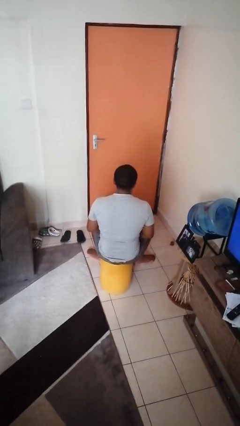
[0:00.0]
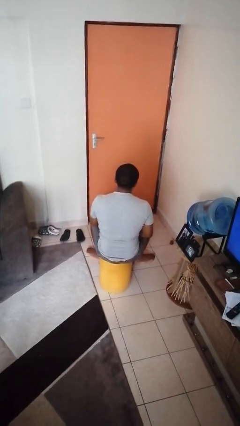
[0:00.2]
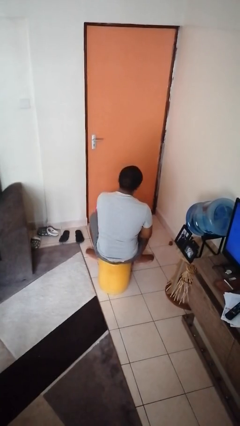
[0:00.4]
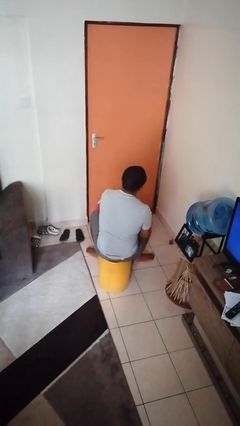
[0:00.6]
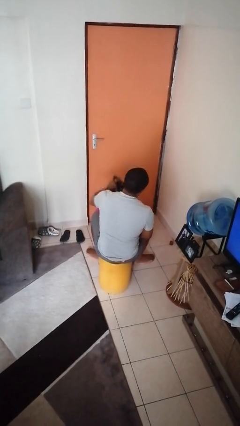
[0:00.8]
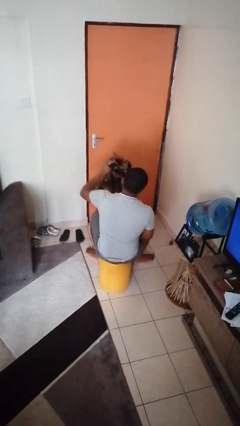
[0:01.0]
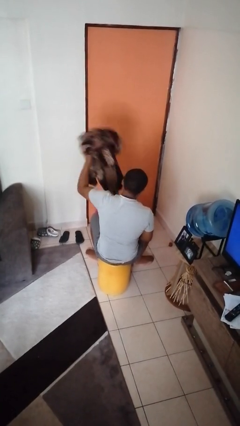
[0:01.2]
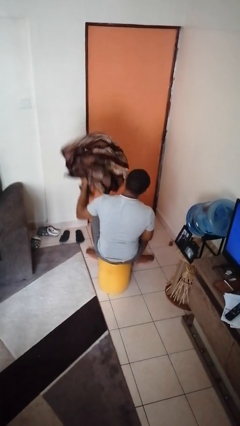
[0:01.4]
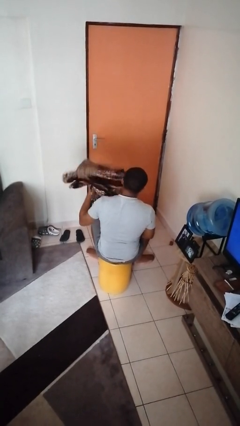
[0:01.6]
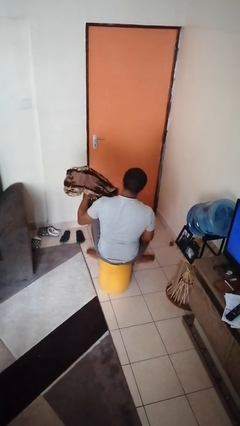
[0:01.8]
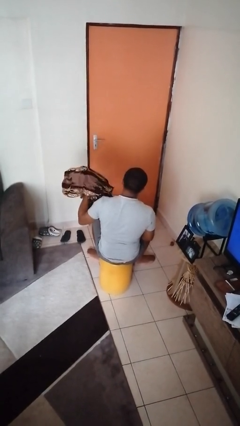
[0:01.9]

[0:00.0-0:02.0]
person takes object from basket

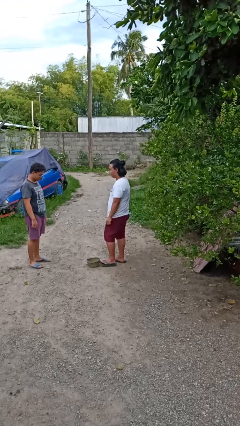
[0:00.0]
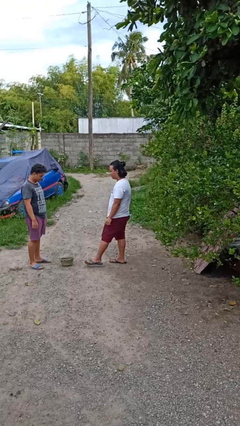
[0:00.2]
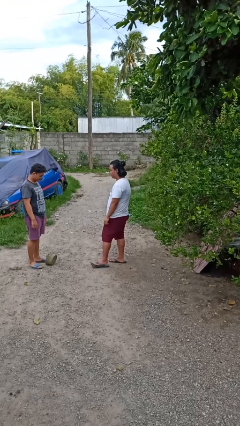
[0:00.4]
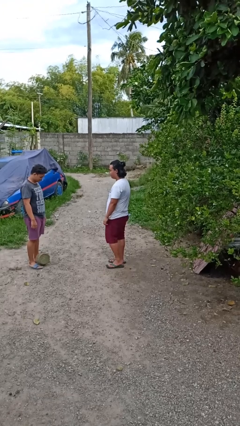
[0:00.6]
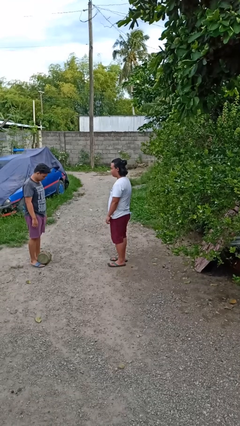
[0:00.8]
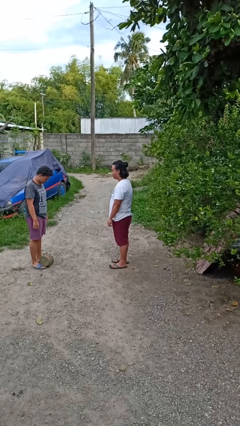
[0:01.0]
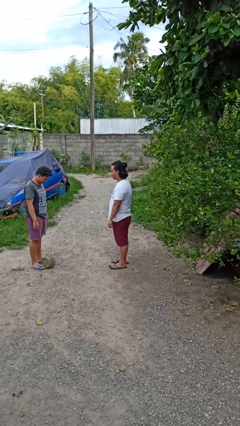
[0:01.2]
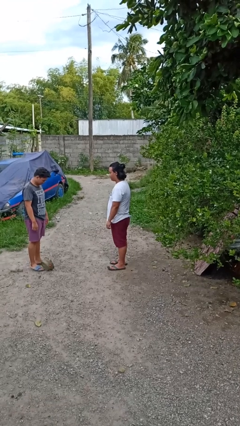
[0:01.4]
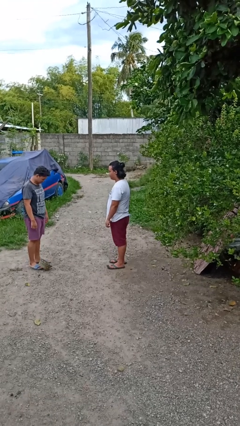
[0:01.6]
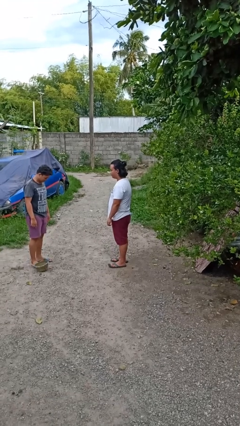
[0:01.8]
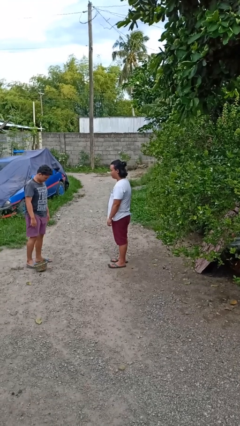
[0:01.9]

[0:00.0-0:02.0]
person kicks object to person

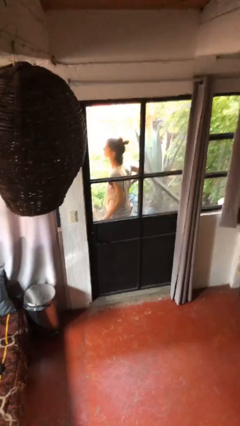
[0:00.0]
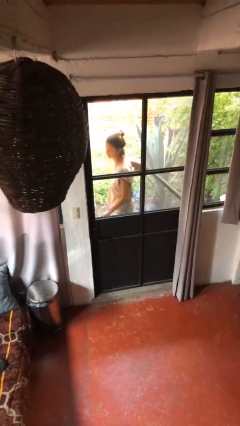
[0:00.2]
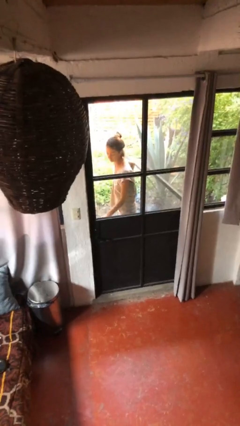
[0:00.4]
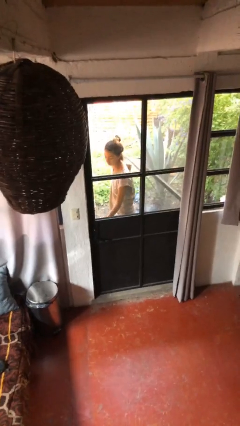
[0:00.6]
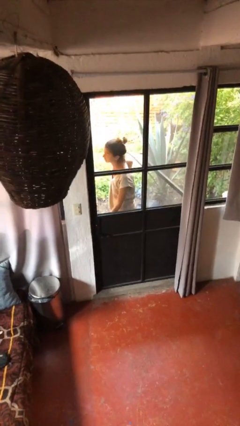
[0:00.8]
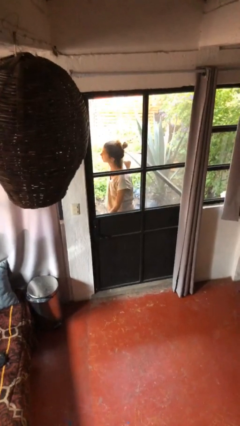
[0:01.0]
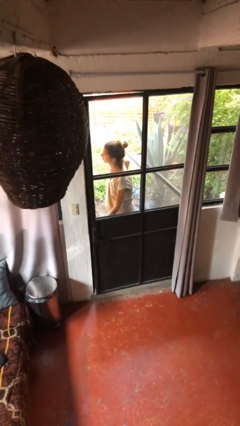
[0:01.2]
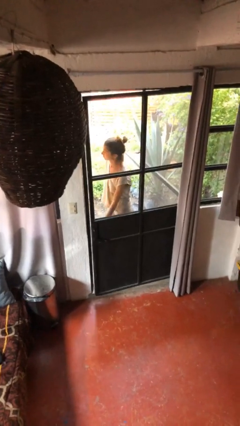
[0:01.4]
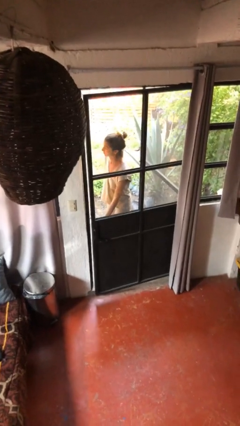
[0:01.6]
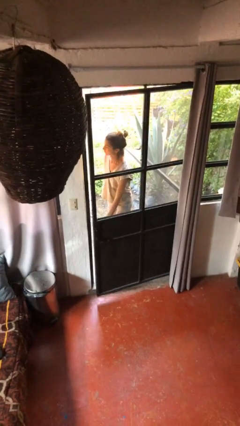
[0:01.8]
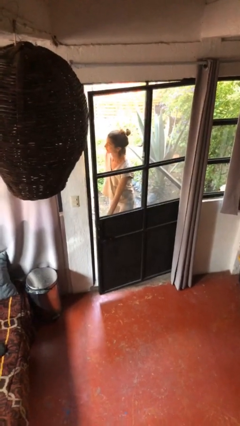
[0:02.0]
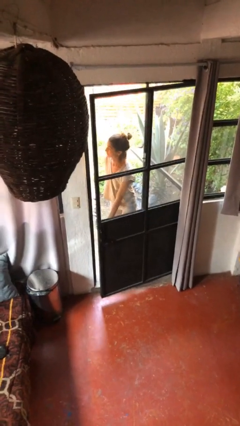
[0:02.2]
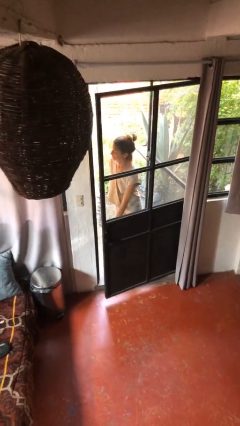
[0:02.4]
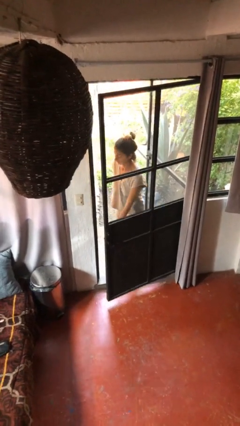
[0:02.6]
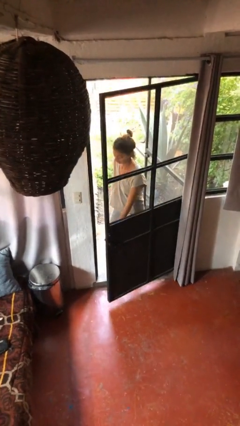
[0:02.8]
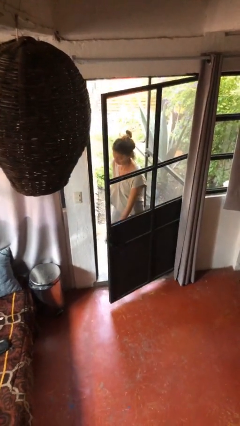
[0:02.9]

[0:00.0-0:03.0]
person opens facility door

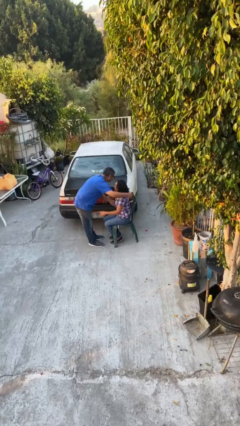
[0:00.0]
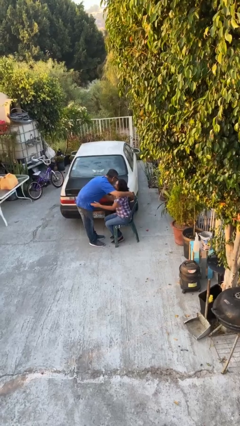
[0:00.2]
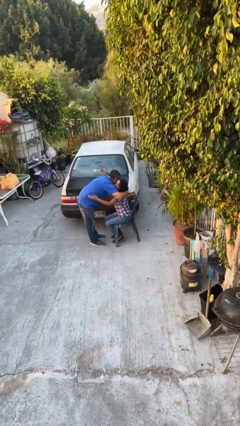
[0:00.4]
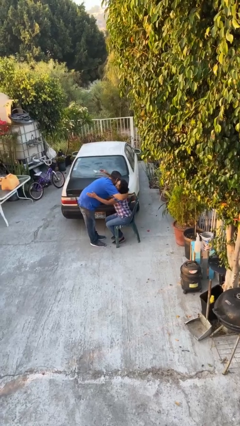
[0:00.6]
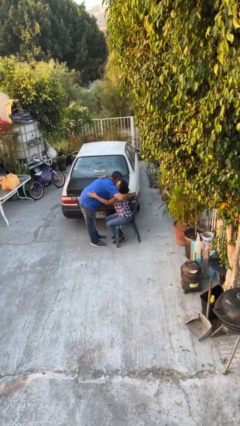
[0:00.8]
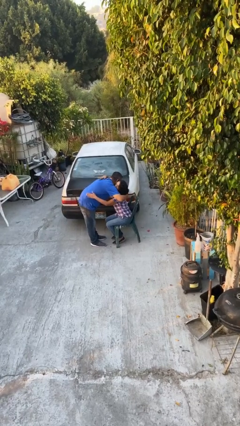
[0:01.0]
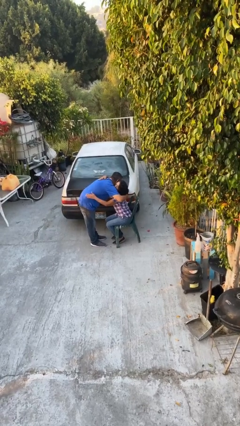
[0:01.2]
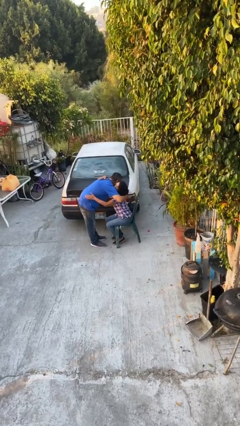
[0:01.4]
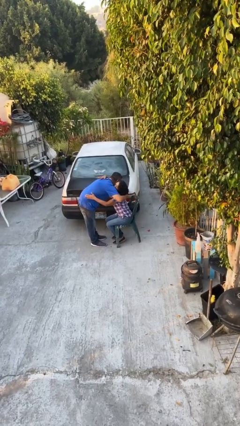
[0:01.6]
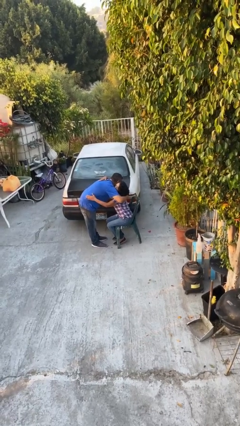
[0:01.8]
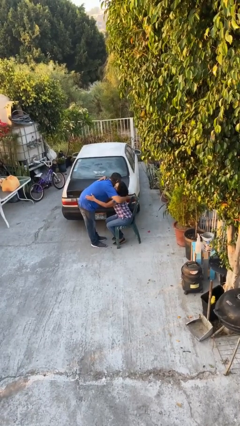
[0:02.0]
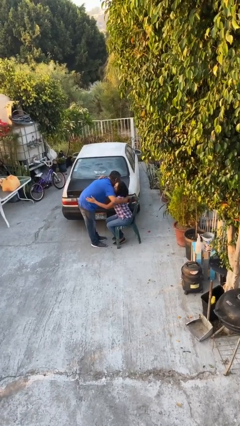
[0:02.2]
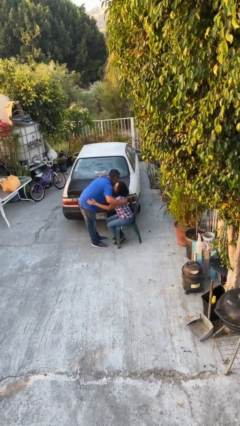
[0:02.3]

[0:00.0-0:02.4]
person embraces person

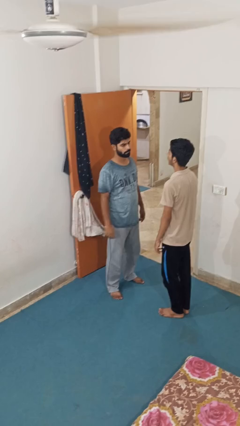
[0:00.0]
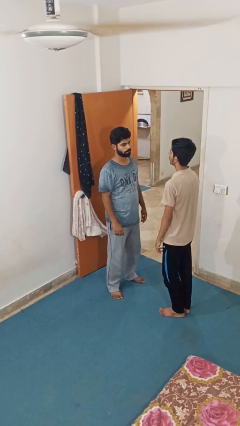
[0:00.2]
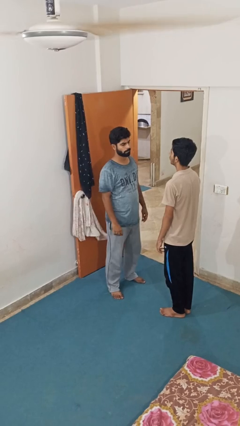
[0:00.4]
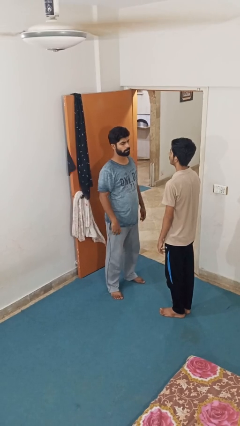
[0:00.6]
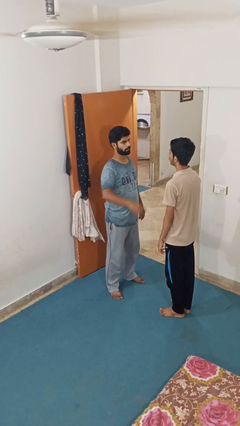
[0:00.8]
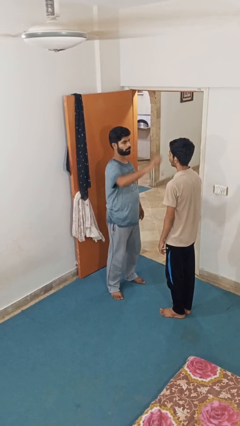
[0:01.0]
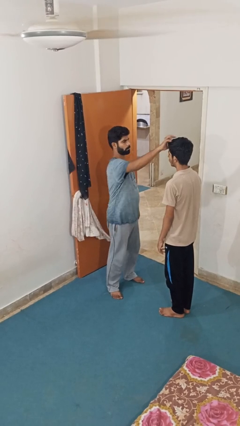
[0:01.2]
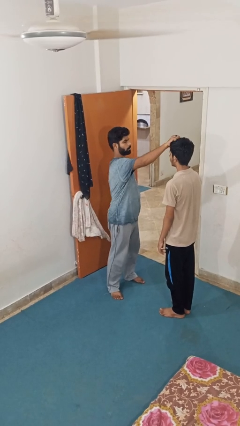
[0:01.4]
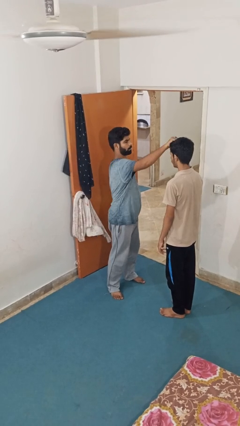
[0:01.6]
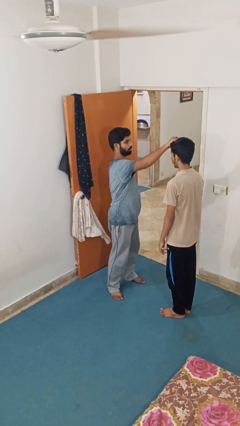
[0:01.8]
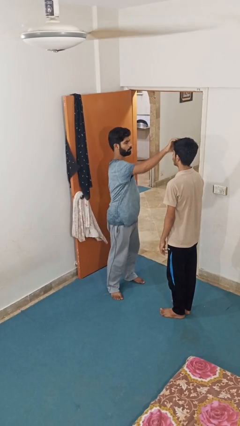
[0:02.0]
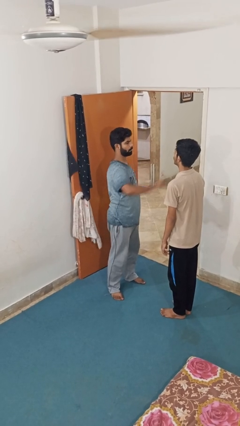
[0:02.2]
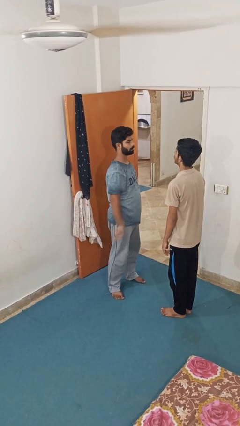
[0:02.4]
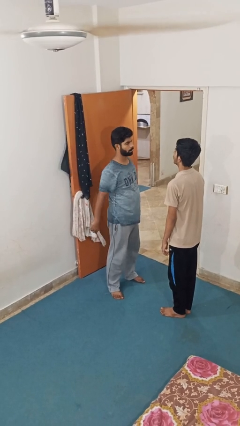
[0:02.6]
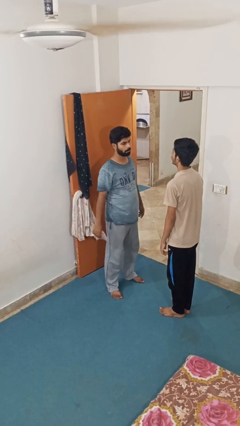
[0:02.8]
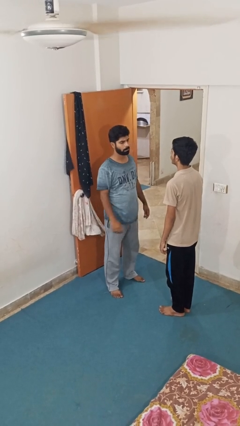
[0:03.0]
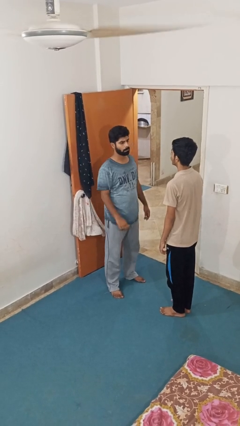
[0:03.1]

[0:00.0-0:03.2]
person grabs person by hair

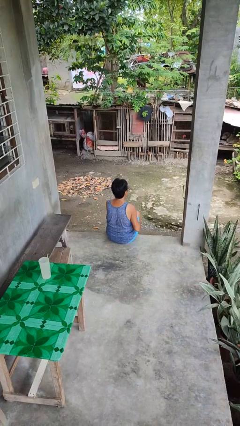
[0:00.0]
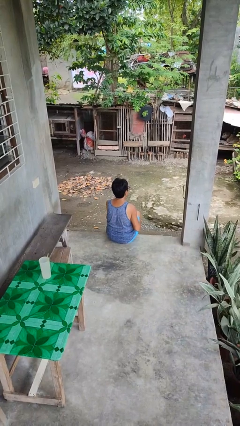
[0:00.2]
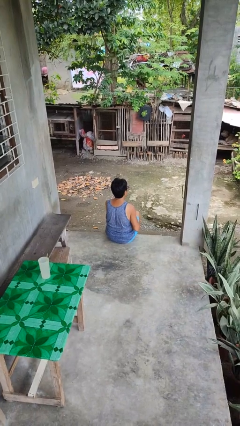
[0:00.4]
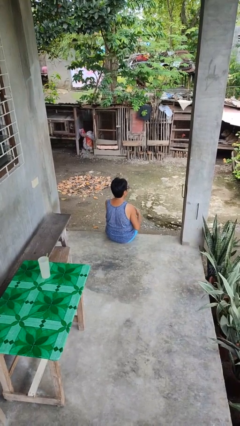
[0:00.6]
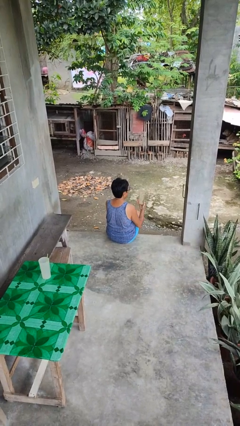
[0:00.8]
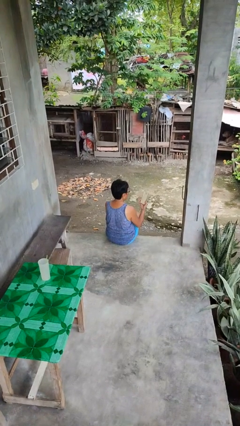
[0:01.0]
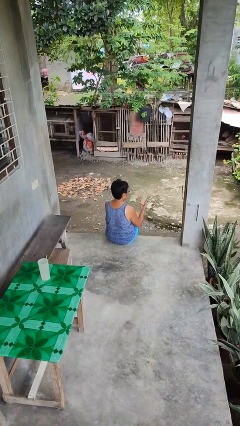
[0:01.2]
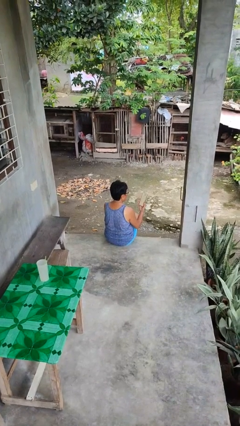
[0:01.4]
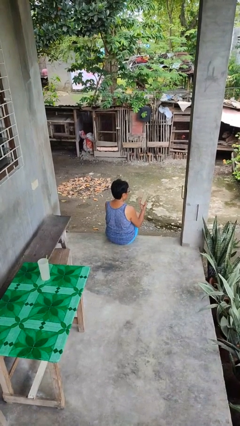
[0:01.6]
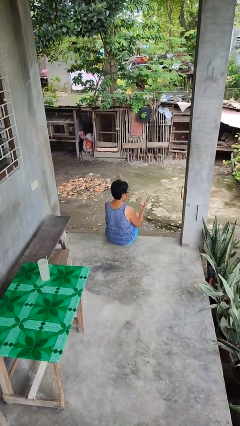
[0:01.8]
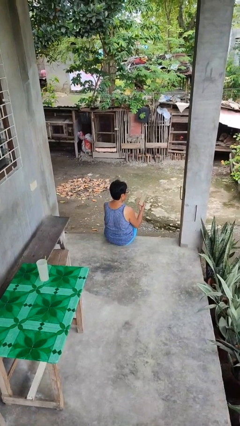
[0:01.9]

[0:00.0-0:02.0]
person takes phone from pocket

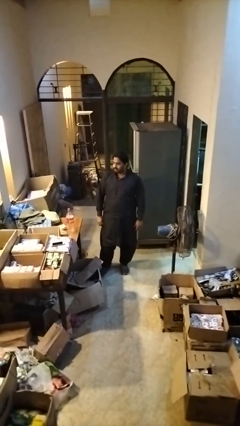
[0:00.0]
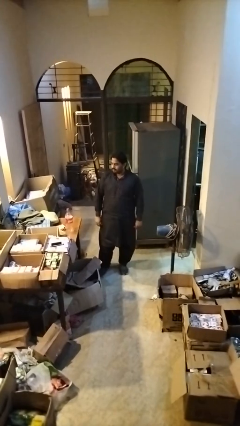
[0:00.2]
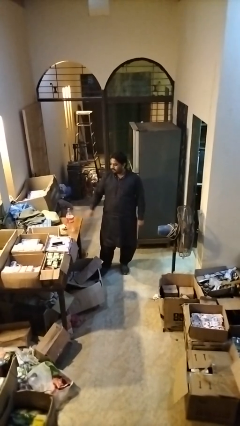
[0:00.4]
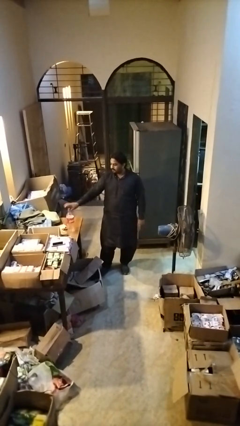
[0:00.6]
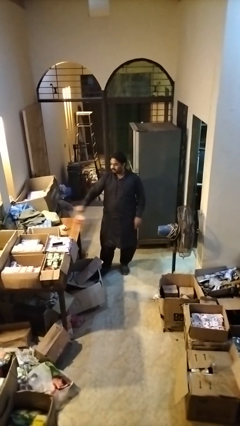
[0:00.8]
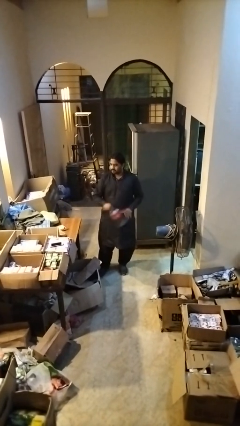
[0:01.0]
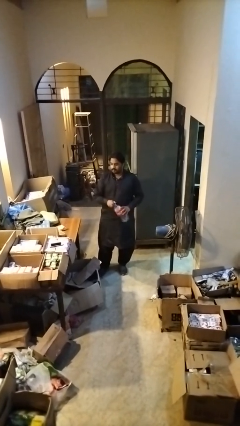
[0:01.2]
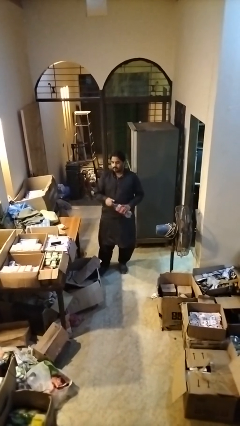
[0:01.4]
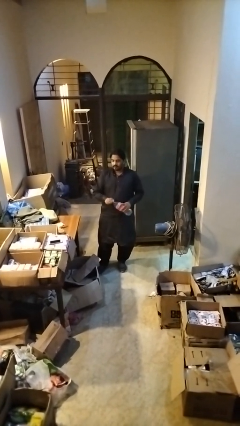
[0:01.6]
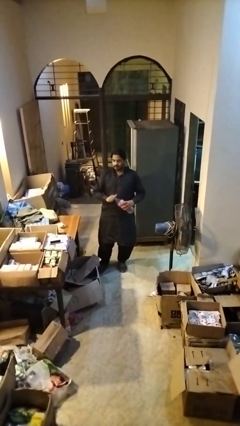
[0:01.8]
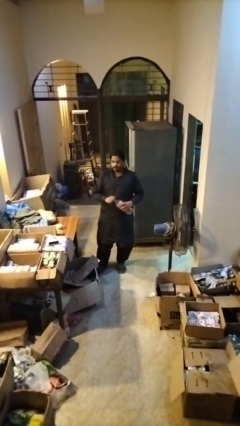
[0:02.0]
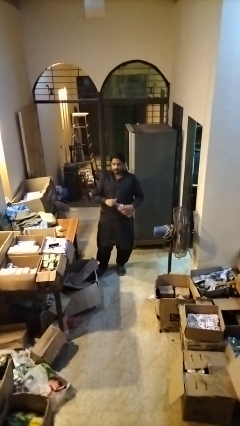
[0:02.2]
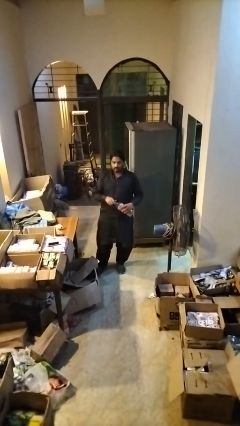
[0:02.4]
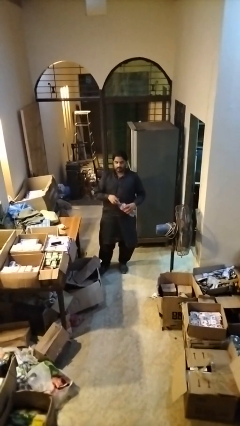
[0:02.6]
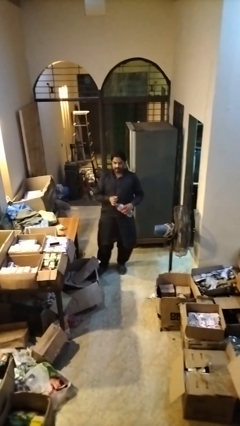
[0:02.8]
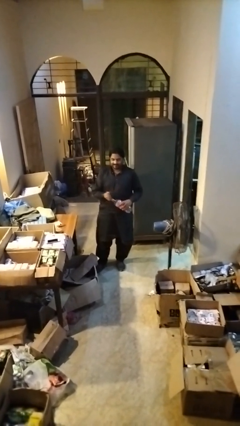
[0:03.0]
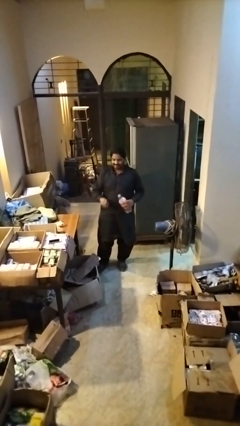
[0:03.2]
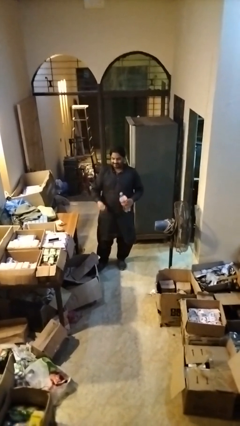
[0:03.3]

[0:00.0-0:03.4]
person unscrews lid from bottle
